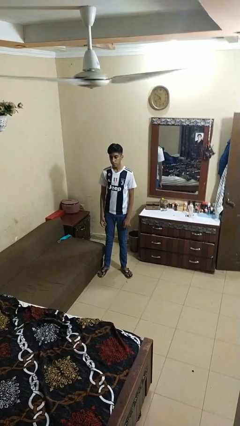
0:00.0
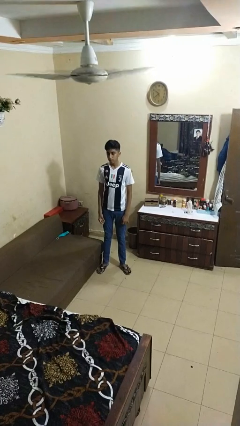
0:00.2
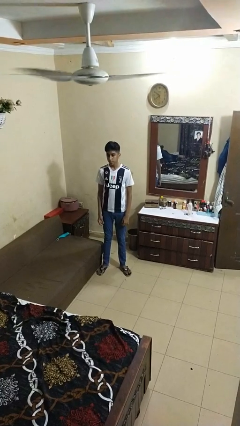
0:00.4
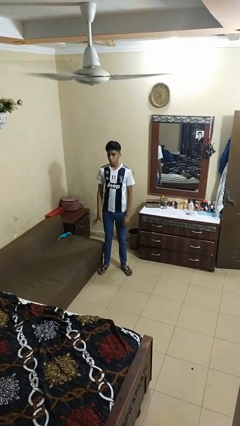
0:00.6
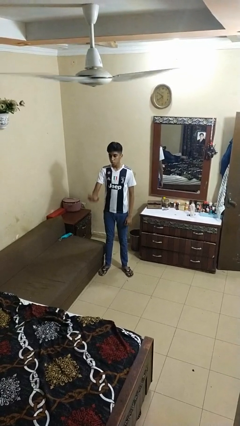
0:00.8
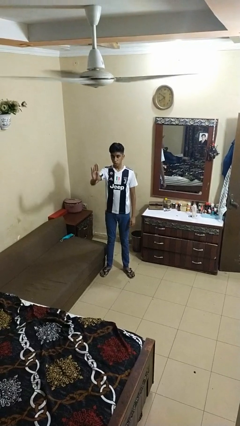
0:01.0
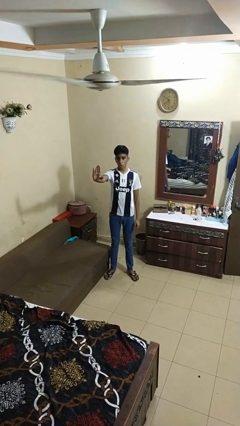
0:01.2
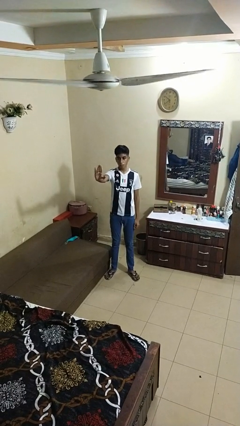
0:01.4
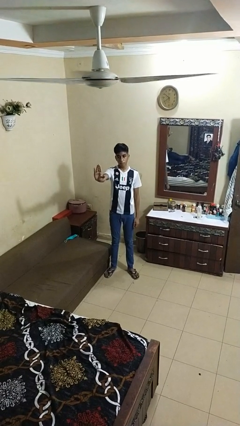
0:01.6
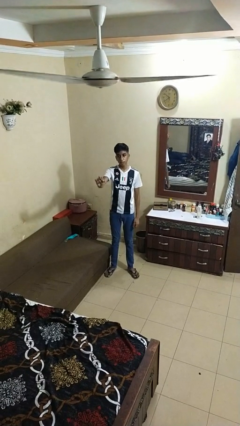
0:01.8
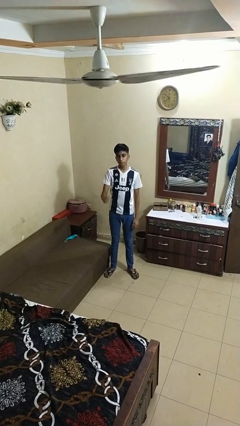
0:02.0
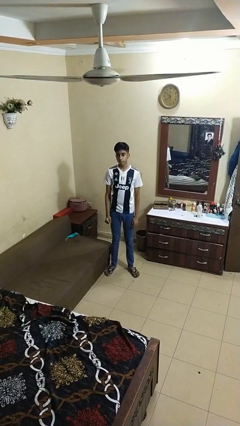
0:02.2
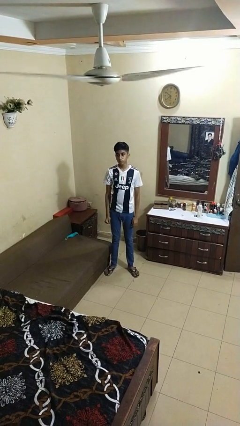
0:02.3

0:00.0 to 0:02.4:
person gestures stop

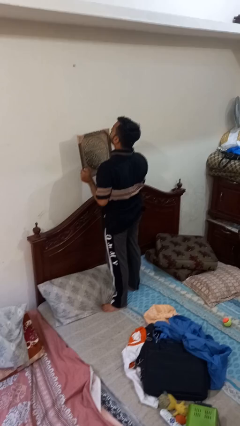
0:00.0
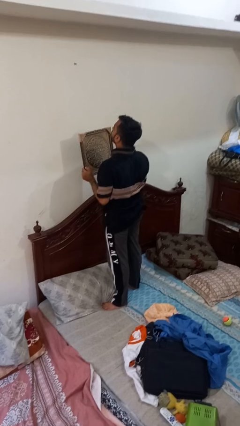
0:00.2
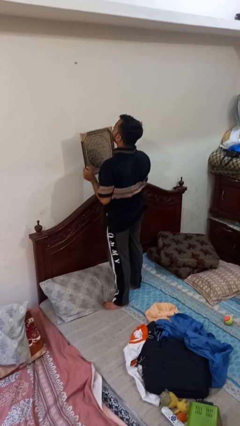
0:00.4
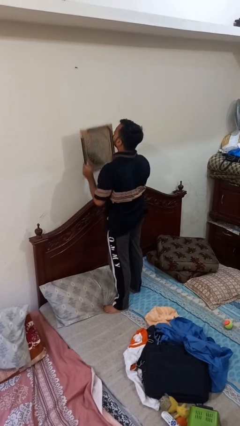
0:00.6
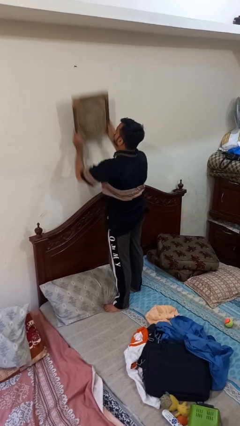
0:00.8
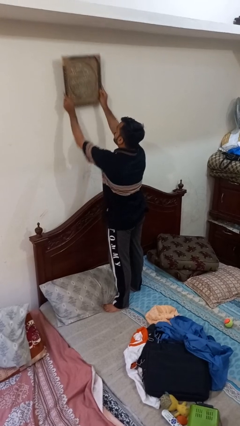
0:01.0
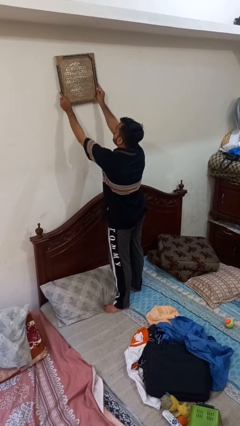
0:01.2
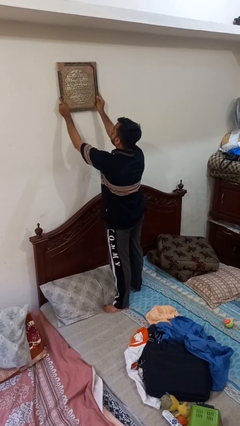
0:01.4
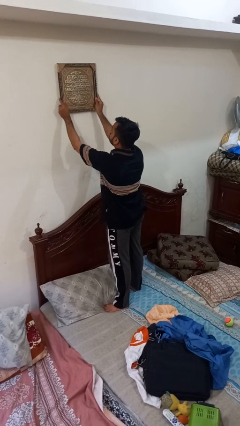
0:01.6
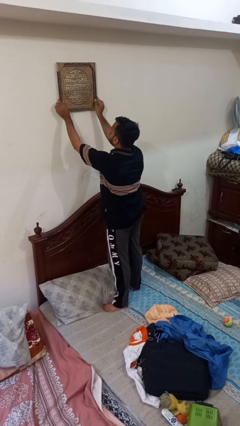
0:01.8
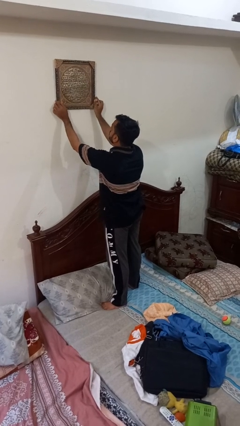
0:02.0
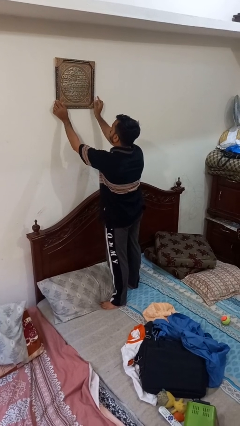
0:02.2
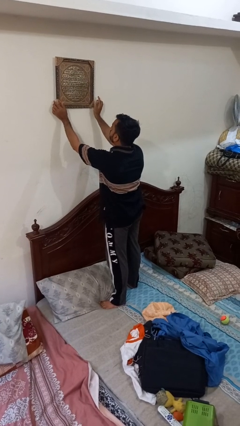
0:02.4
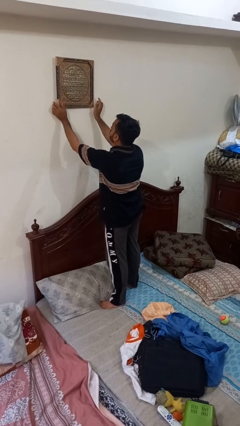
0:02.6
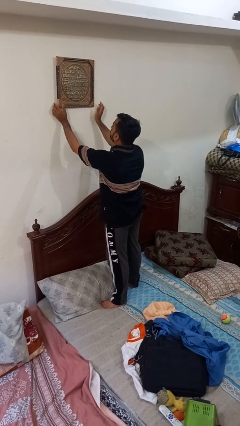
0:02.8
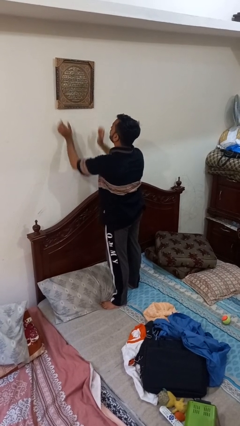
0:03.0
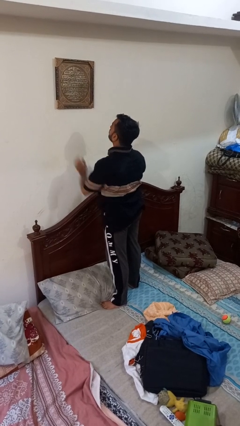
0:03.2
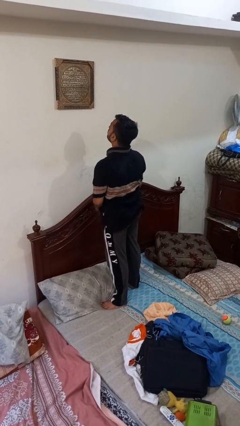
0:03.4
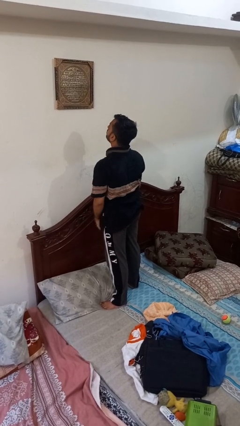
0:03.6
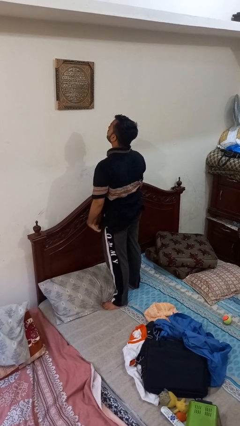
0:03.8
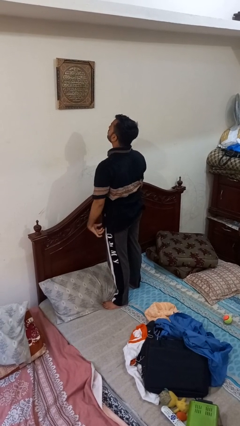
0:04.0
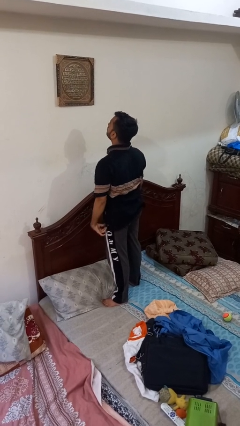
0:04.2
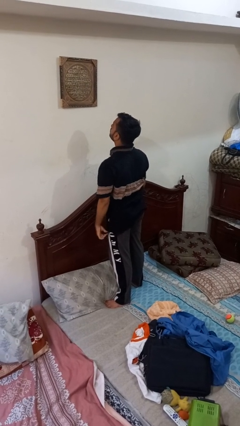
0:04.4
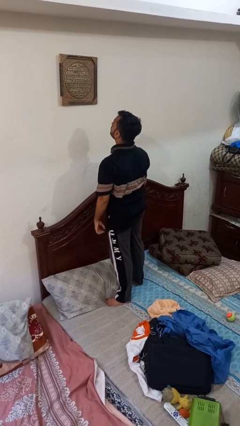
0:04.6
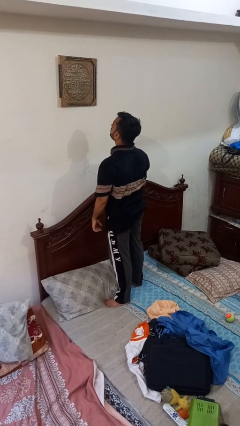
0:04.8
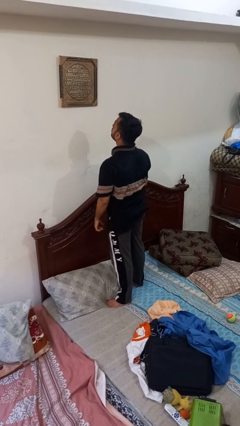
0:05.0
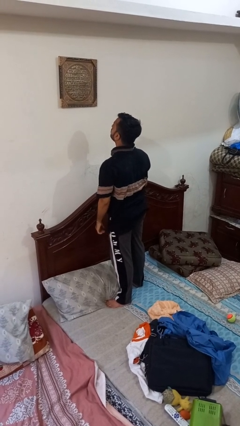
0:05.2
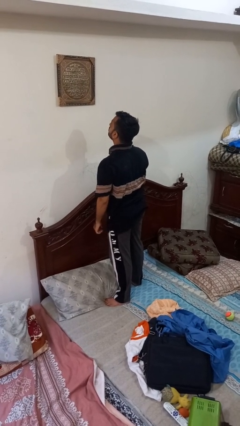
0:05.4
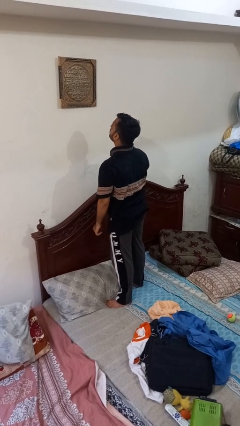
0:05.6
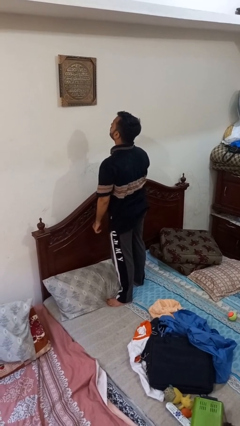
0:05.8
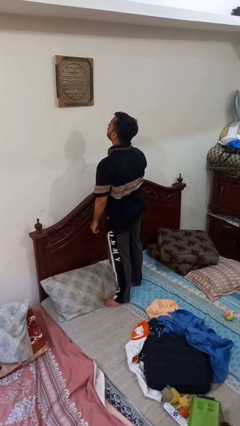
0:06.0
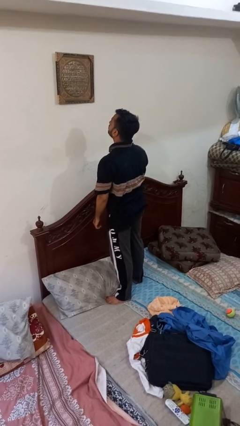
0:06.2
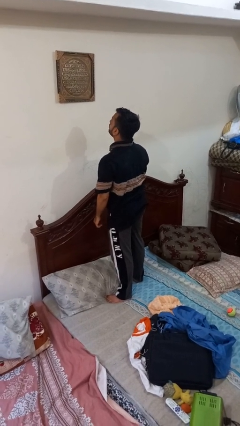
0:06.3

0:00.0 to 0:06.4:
person puts up picture frame

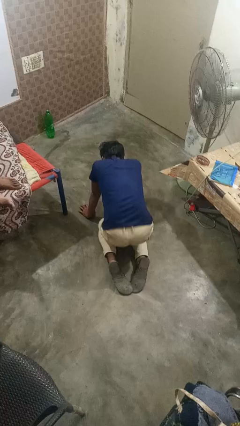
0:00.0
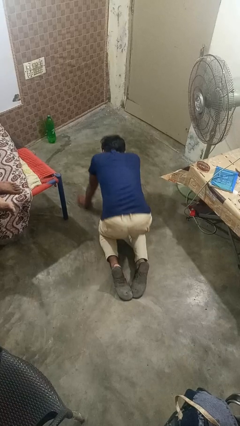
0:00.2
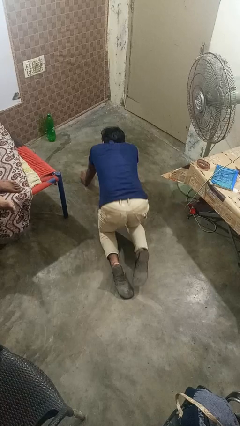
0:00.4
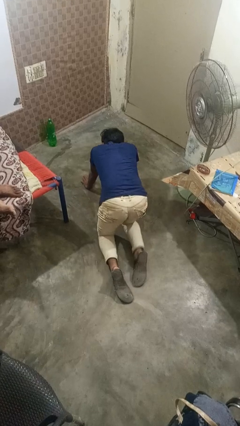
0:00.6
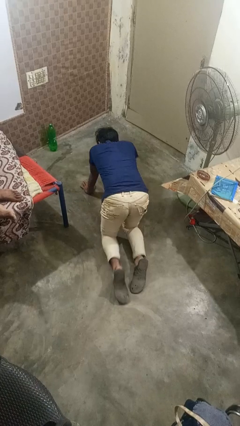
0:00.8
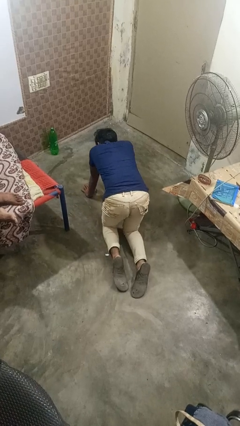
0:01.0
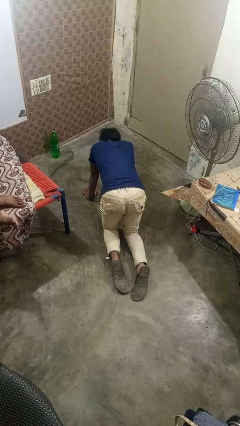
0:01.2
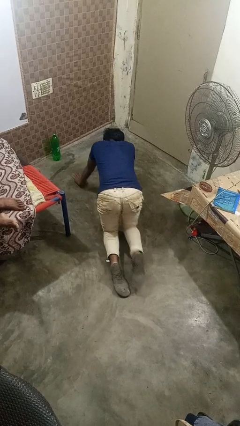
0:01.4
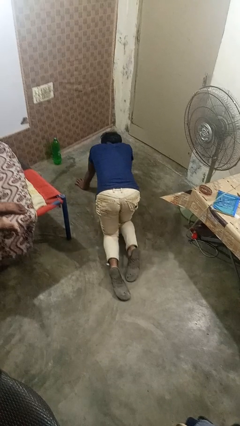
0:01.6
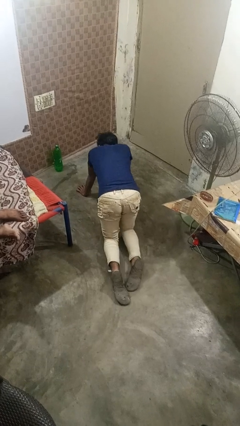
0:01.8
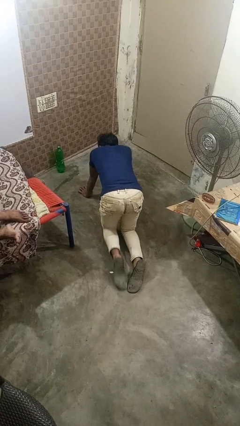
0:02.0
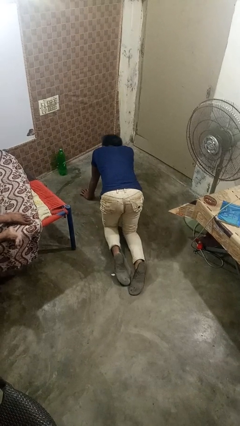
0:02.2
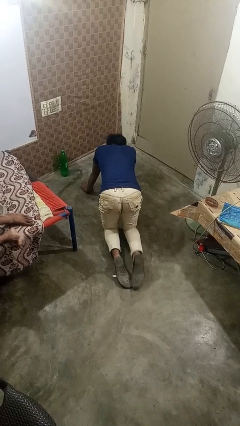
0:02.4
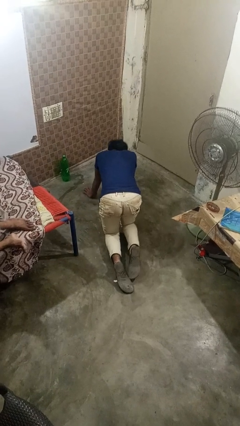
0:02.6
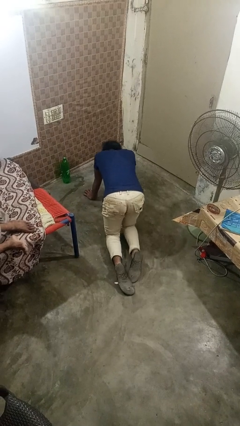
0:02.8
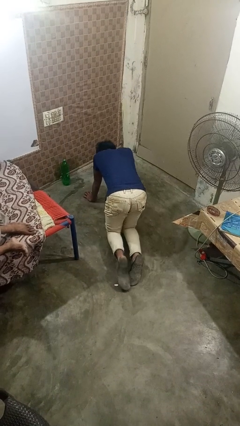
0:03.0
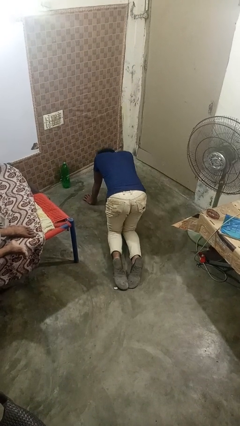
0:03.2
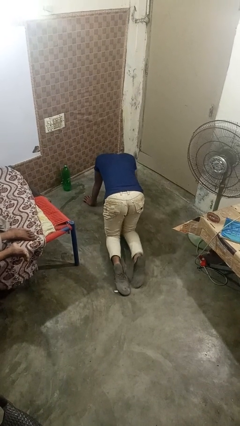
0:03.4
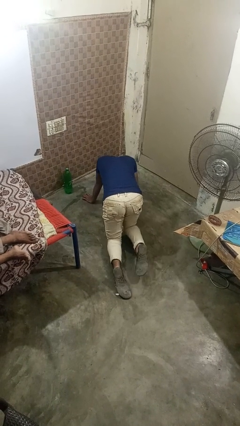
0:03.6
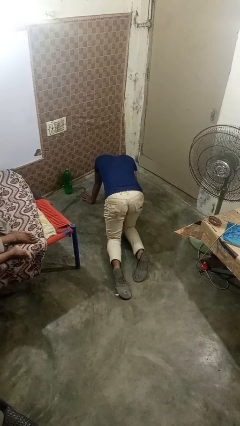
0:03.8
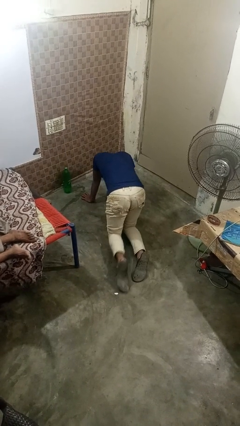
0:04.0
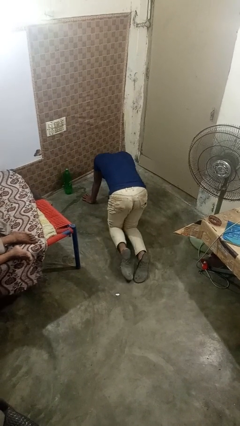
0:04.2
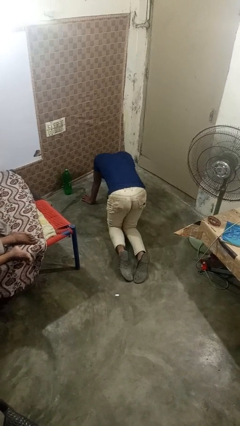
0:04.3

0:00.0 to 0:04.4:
person crawls

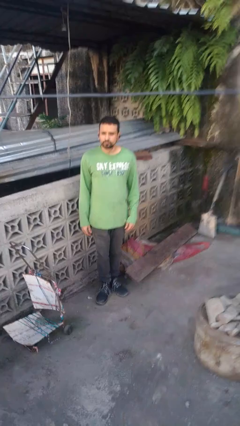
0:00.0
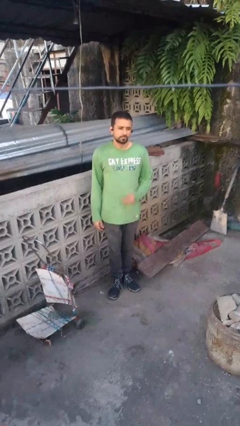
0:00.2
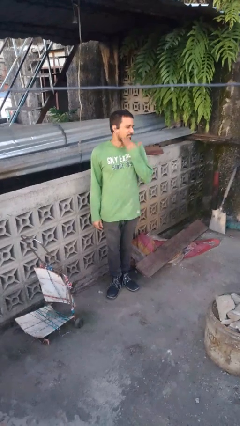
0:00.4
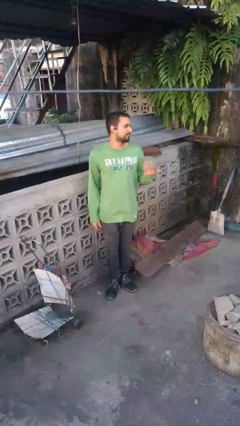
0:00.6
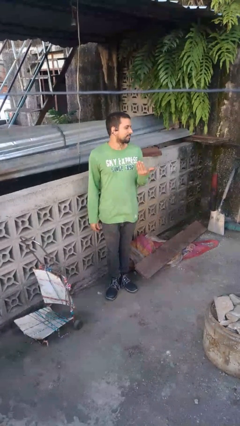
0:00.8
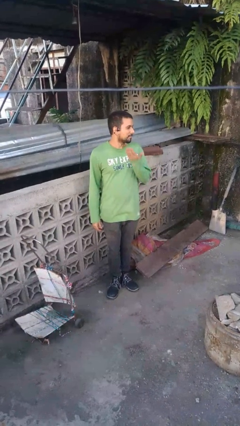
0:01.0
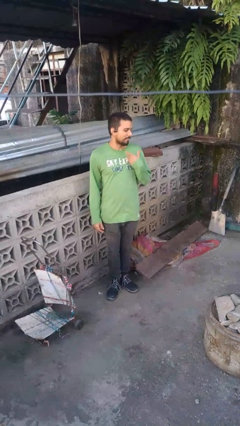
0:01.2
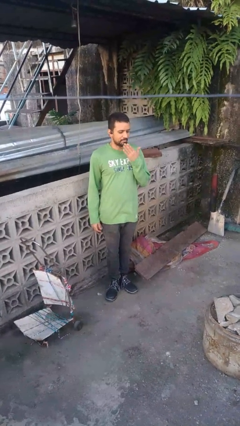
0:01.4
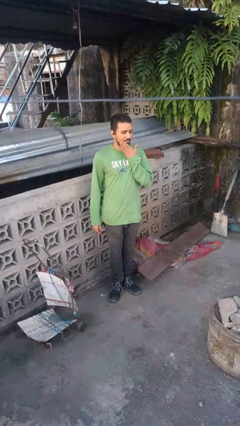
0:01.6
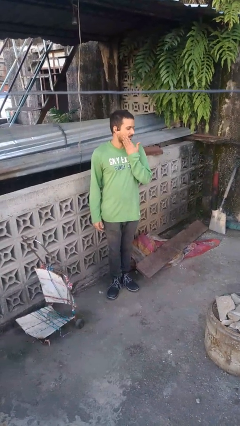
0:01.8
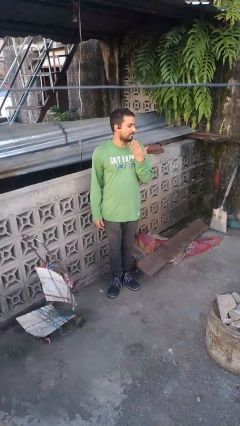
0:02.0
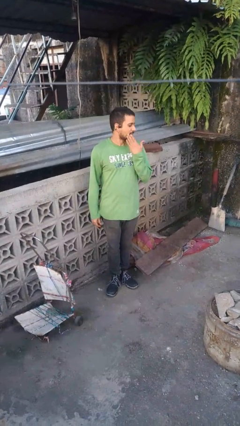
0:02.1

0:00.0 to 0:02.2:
person swats bug

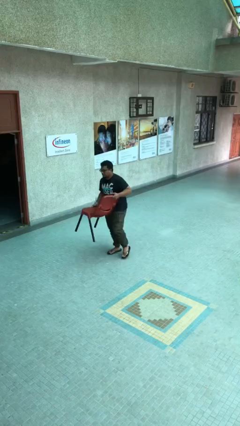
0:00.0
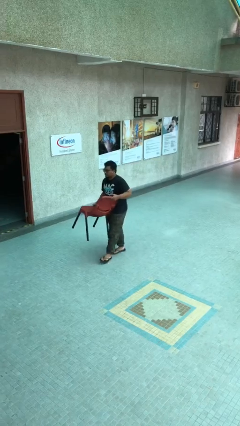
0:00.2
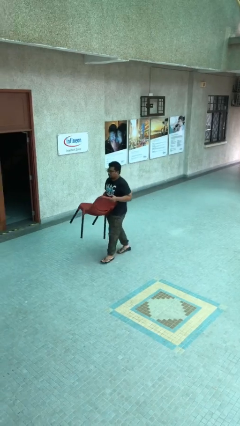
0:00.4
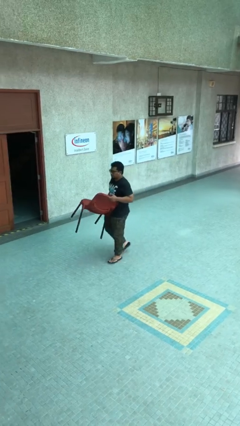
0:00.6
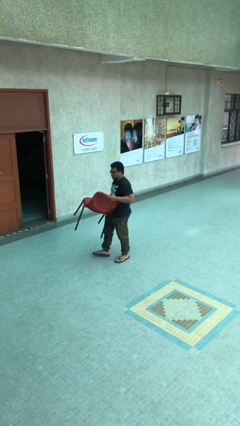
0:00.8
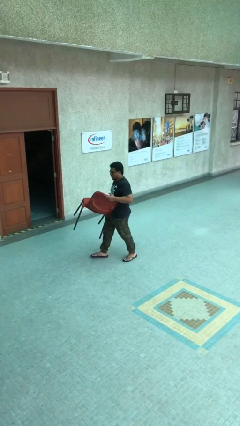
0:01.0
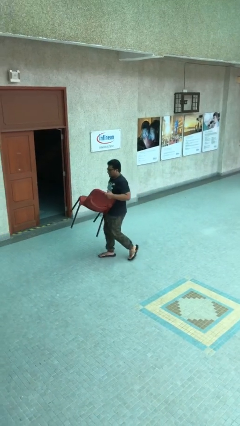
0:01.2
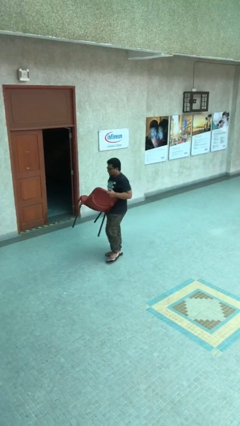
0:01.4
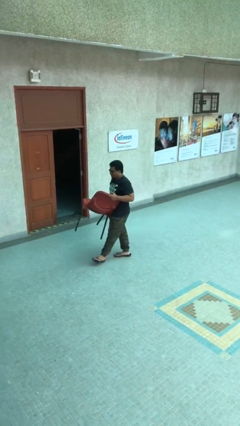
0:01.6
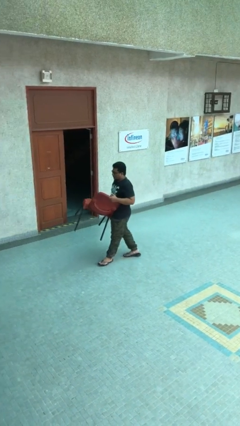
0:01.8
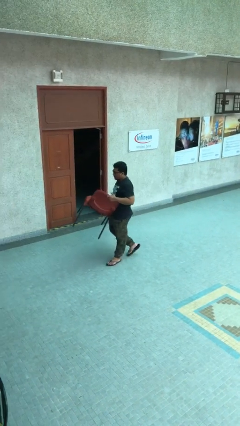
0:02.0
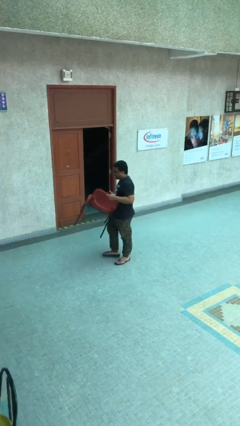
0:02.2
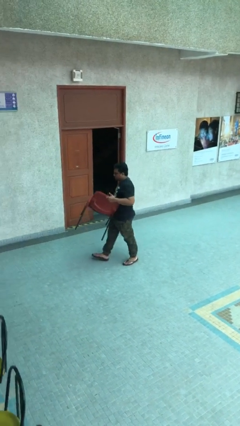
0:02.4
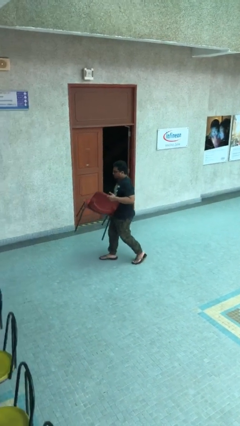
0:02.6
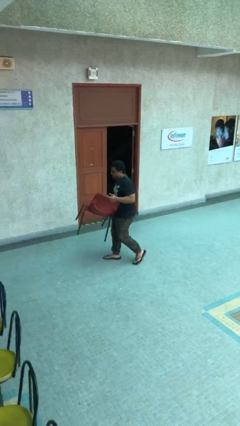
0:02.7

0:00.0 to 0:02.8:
person carries heavy object
